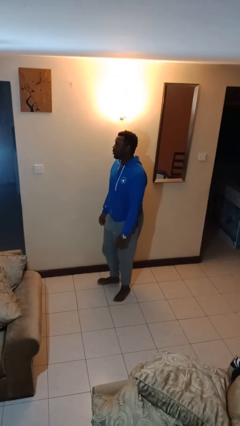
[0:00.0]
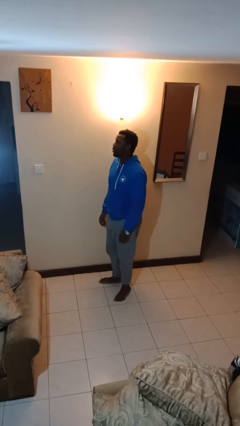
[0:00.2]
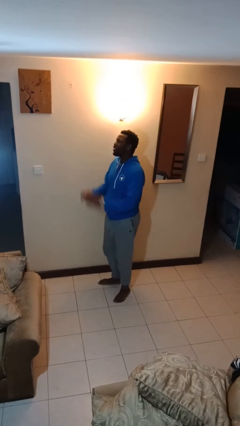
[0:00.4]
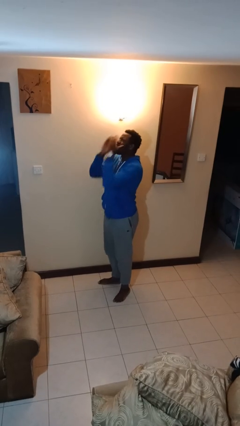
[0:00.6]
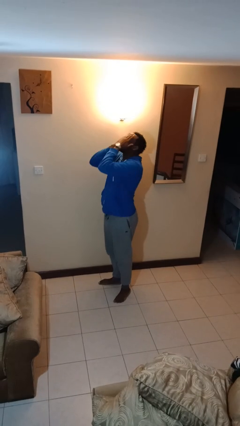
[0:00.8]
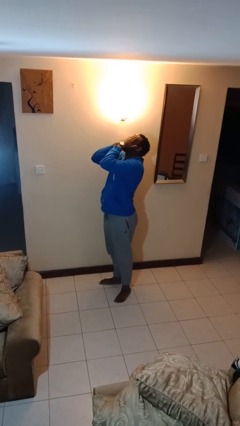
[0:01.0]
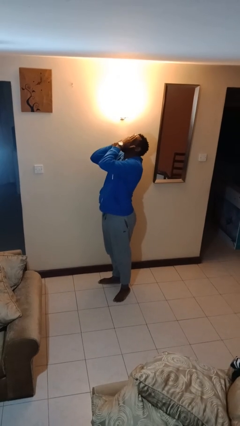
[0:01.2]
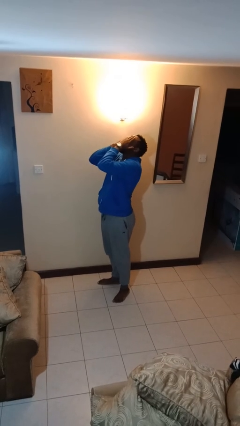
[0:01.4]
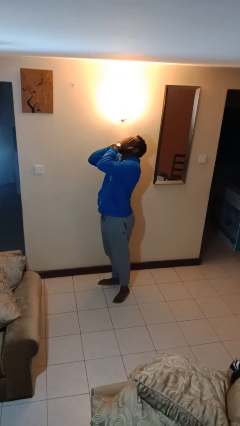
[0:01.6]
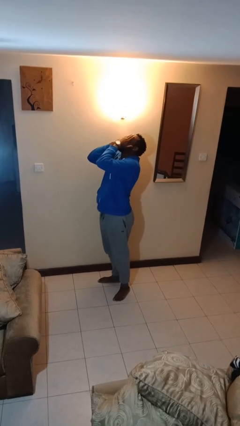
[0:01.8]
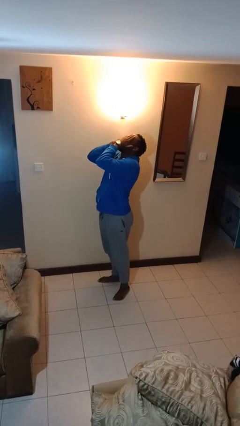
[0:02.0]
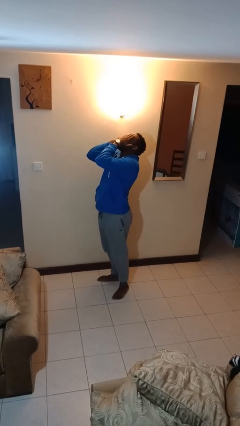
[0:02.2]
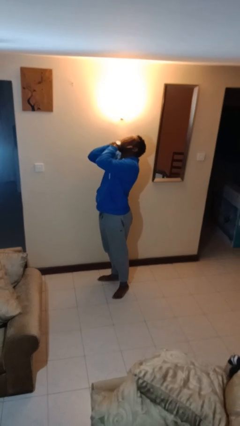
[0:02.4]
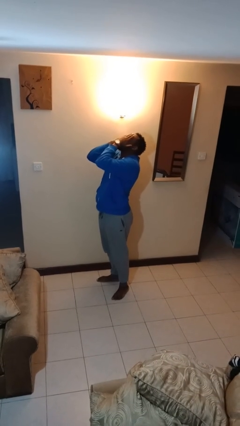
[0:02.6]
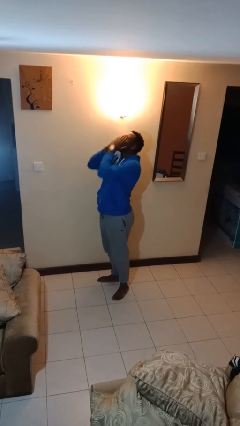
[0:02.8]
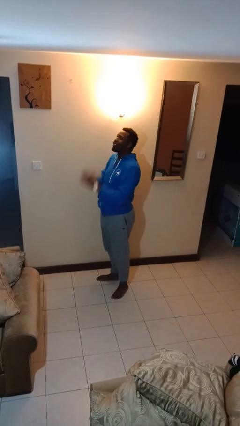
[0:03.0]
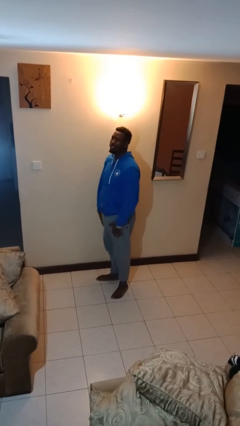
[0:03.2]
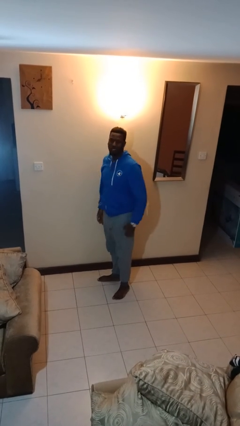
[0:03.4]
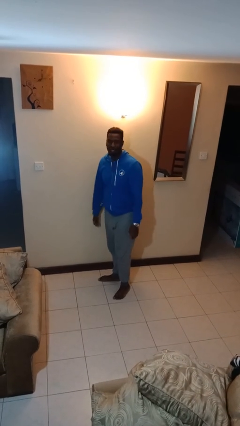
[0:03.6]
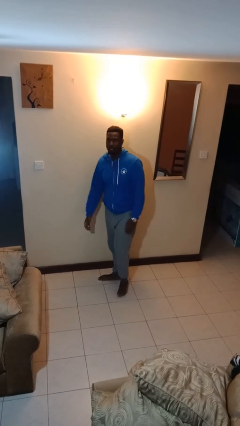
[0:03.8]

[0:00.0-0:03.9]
person covers face with hands

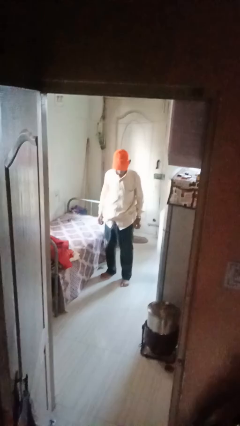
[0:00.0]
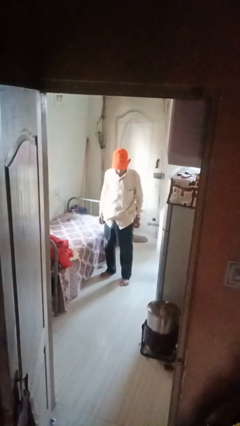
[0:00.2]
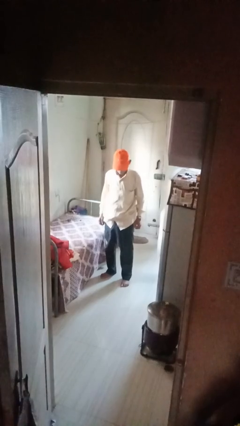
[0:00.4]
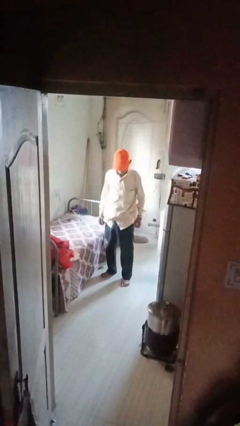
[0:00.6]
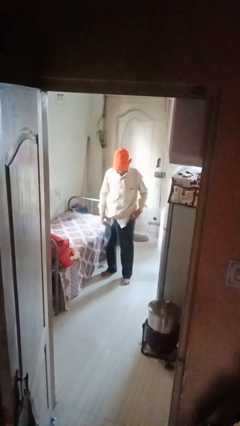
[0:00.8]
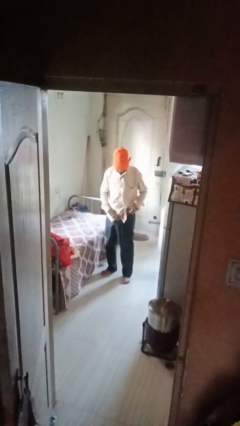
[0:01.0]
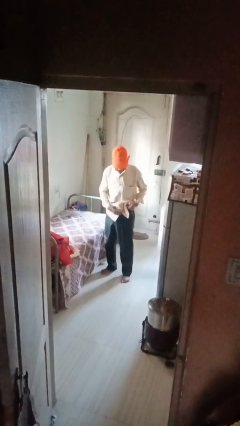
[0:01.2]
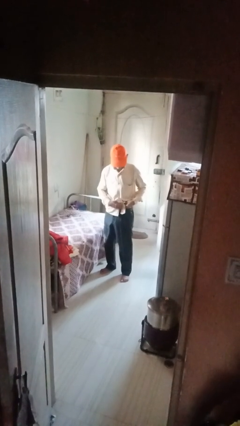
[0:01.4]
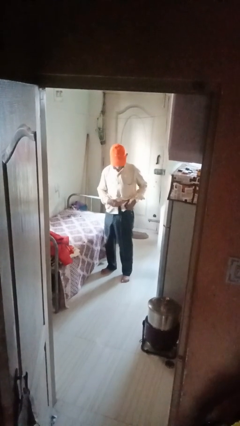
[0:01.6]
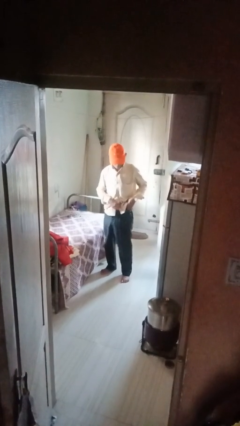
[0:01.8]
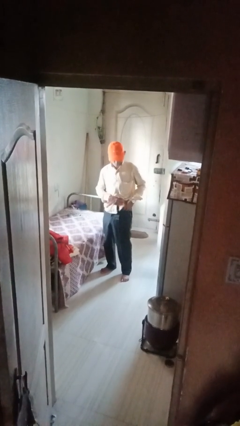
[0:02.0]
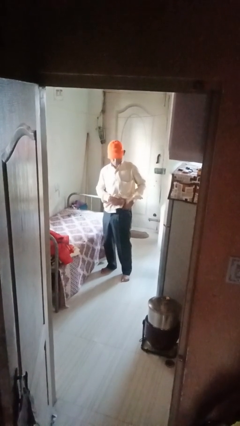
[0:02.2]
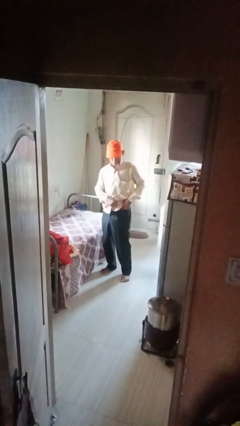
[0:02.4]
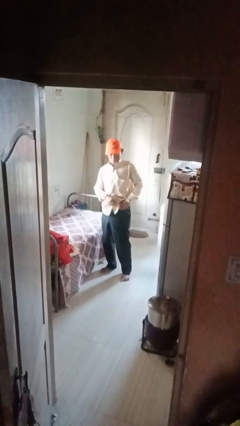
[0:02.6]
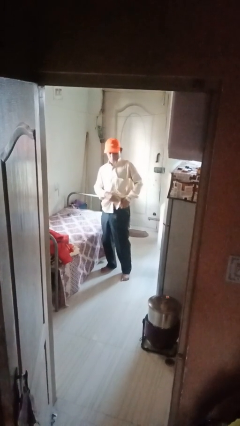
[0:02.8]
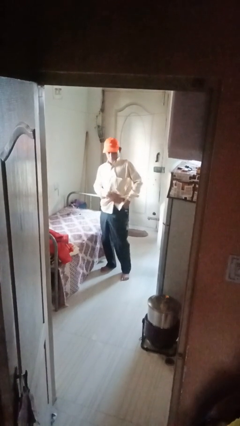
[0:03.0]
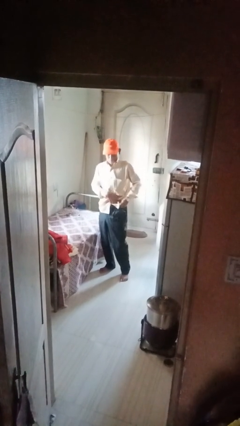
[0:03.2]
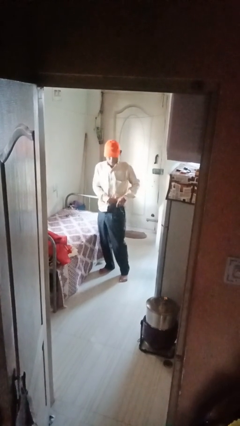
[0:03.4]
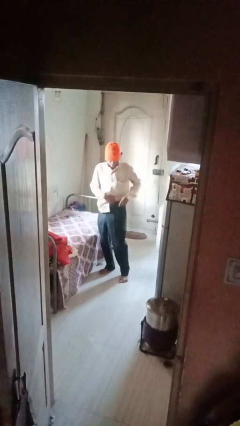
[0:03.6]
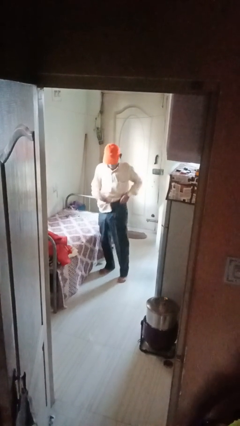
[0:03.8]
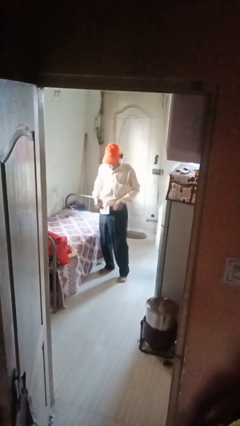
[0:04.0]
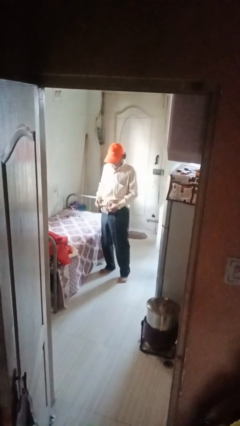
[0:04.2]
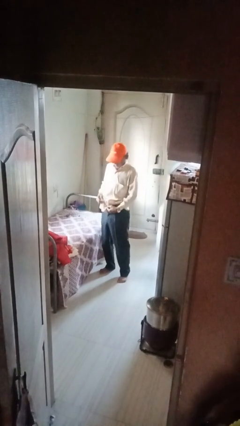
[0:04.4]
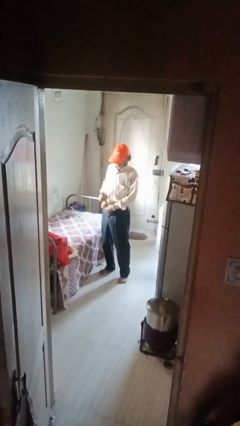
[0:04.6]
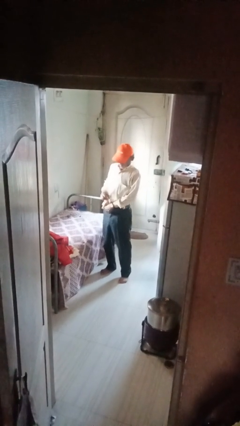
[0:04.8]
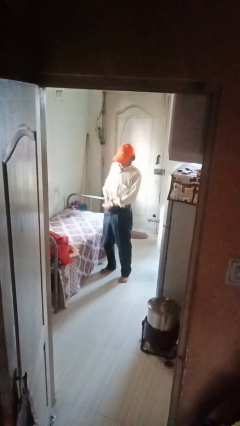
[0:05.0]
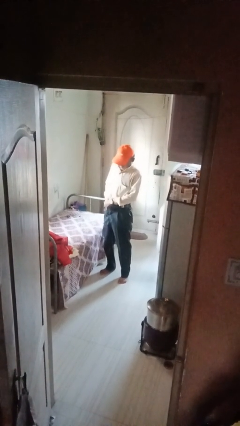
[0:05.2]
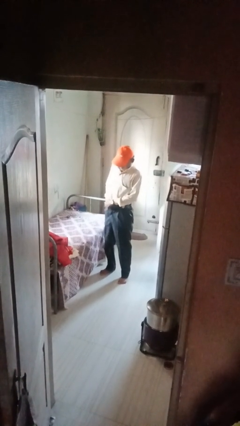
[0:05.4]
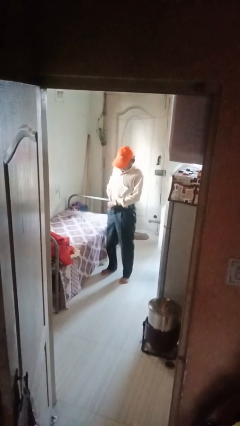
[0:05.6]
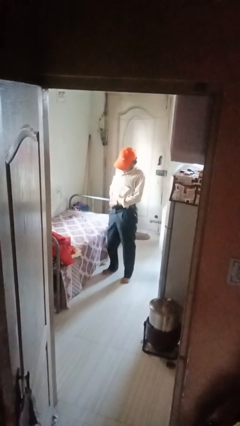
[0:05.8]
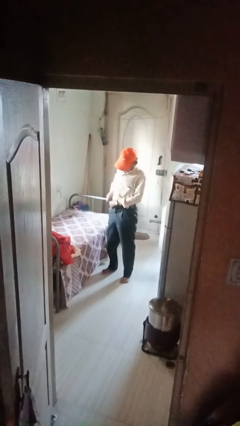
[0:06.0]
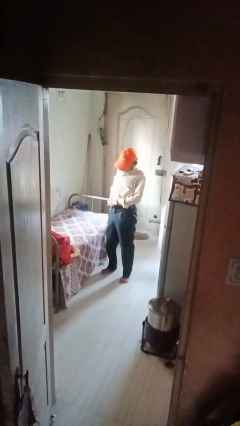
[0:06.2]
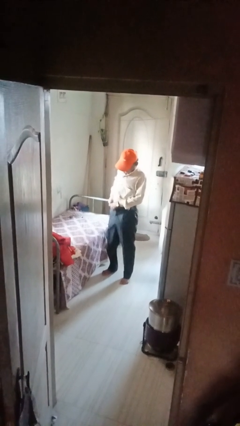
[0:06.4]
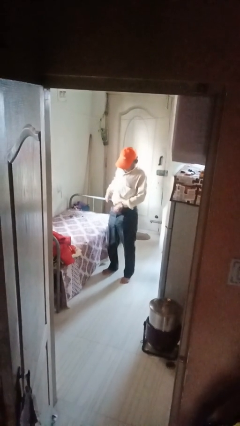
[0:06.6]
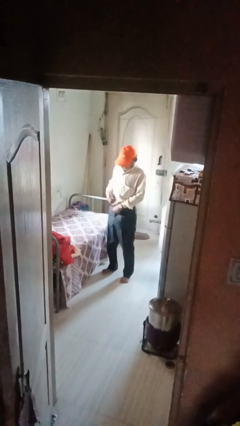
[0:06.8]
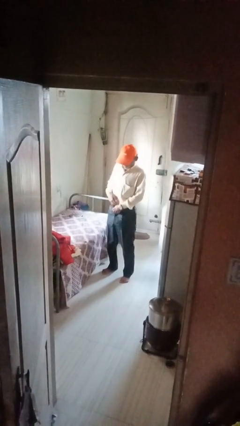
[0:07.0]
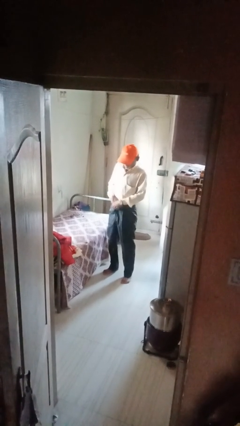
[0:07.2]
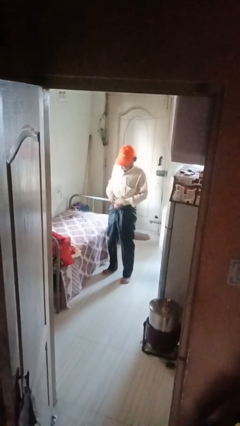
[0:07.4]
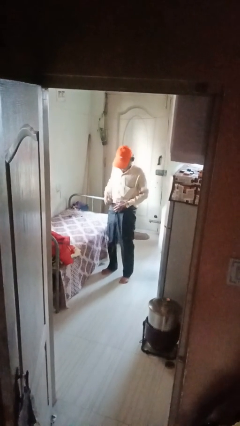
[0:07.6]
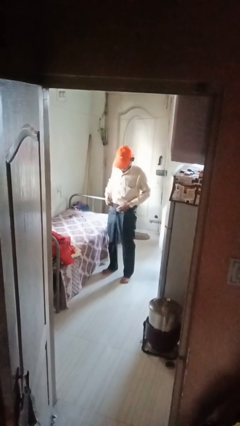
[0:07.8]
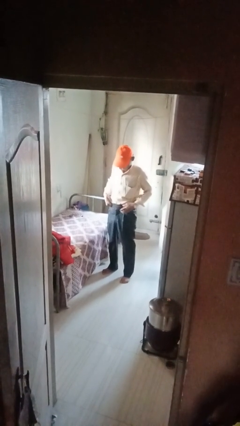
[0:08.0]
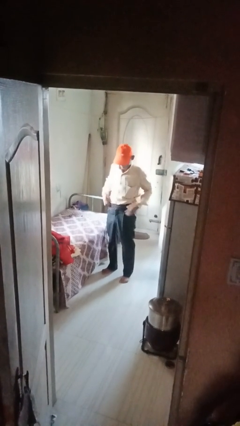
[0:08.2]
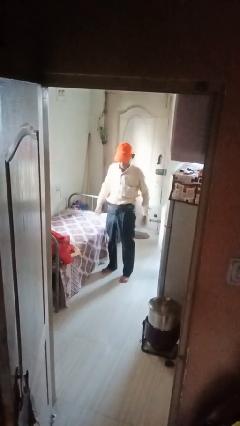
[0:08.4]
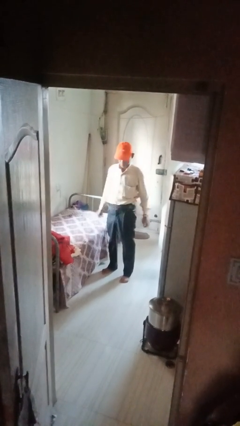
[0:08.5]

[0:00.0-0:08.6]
person tucks in shirt

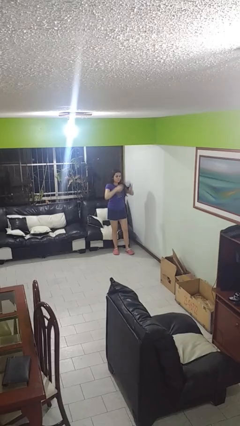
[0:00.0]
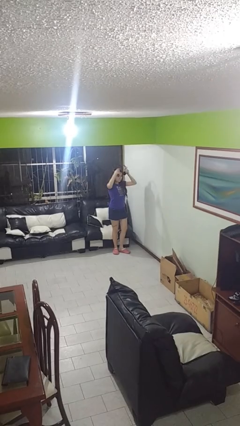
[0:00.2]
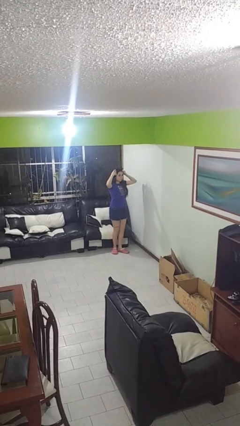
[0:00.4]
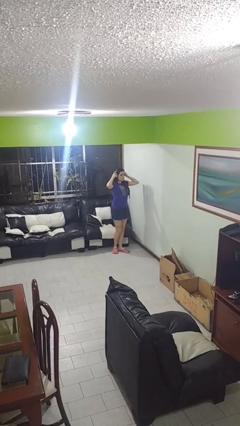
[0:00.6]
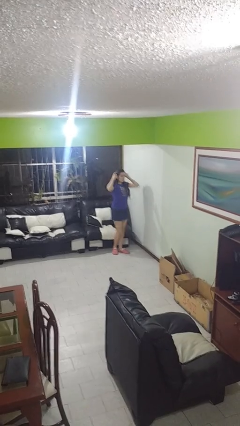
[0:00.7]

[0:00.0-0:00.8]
person puts on headphones

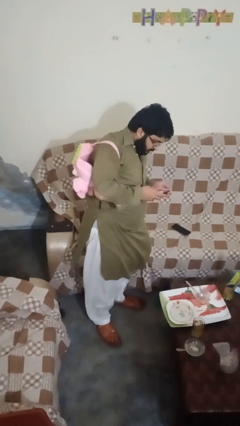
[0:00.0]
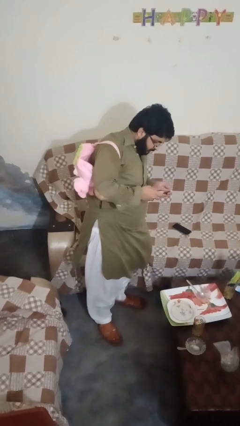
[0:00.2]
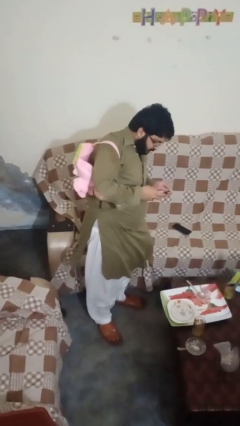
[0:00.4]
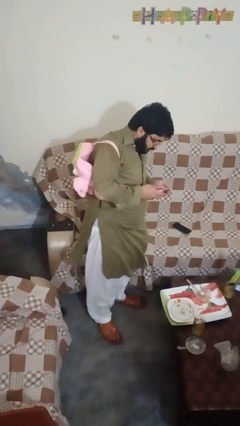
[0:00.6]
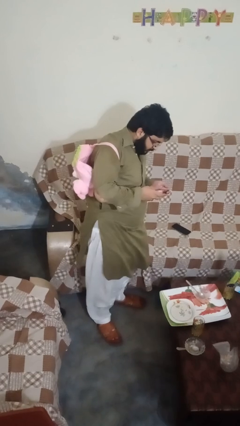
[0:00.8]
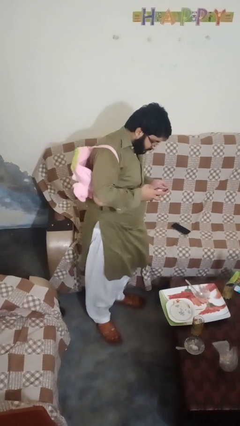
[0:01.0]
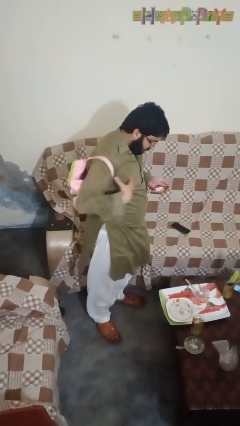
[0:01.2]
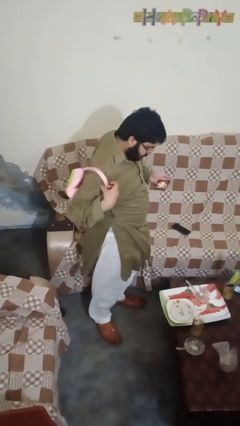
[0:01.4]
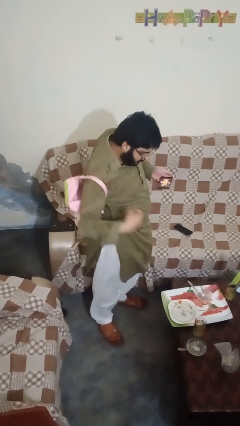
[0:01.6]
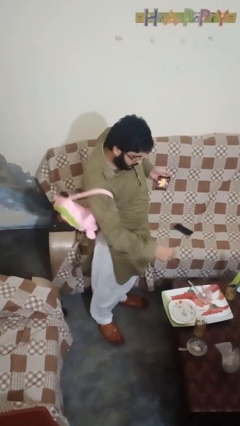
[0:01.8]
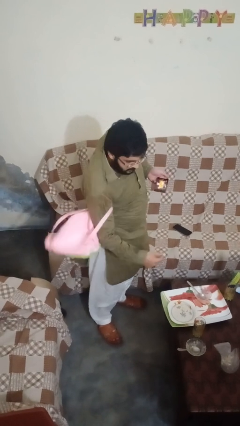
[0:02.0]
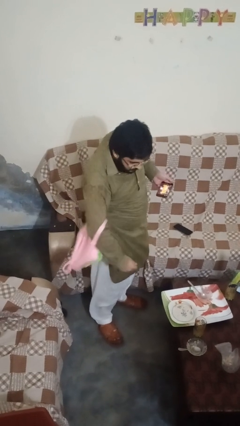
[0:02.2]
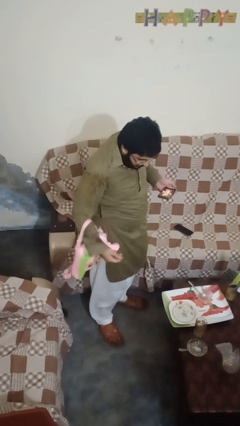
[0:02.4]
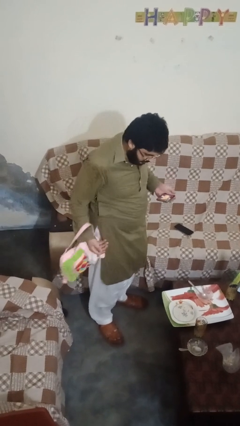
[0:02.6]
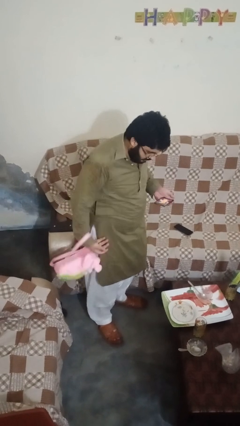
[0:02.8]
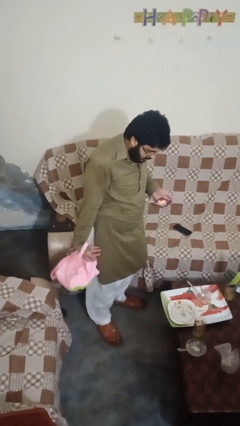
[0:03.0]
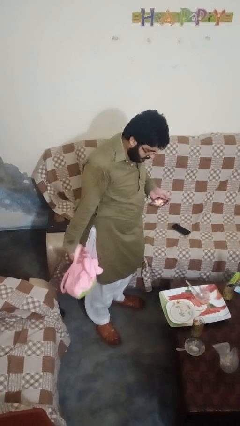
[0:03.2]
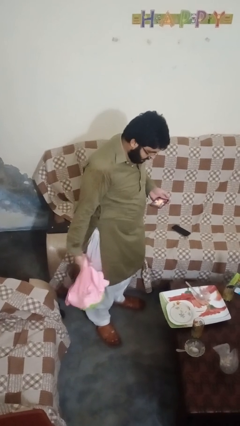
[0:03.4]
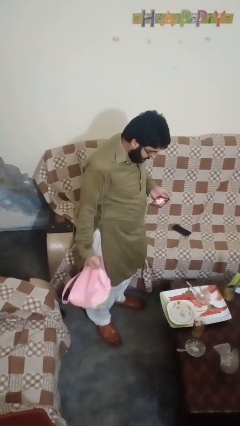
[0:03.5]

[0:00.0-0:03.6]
person takes off backpack

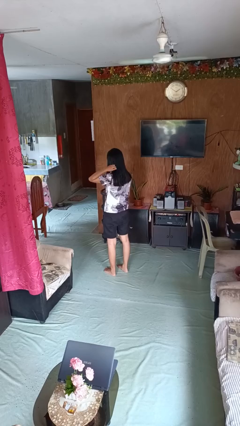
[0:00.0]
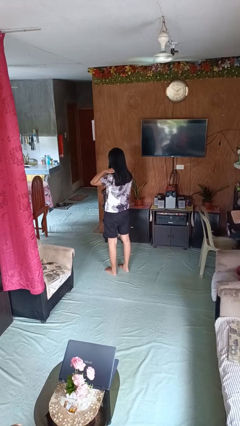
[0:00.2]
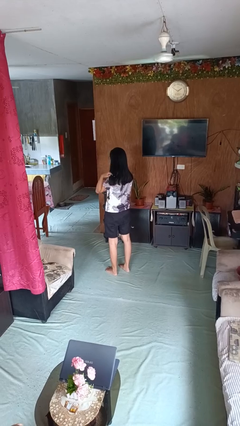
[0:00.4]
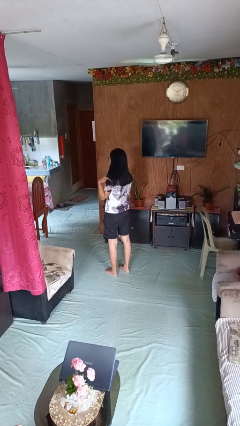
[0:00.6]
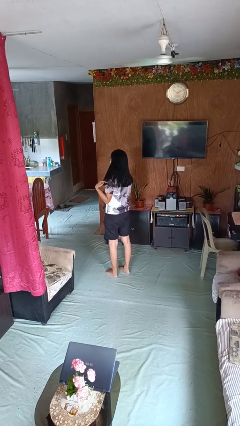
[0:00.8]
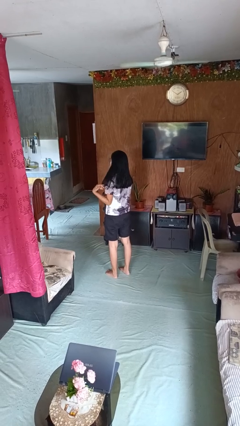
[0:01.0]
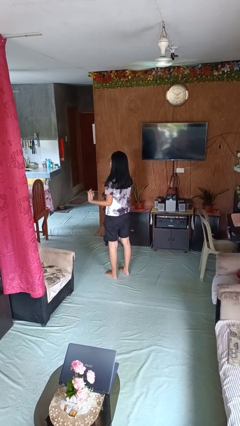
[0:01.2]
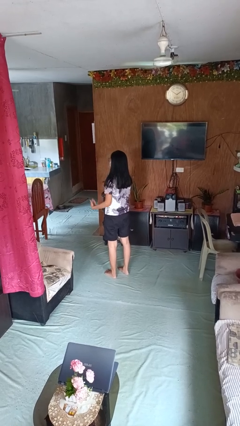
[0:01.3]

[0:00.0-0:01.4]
person strokes hair
